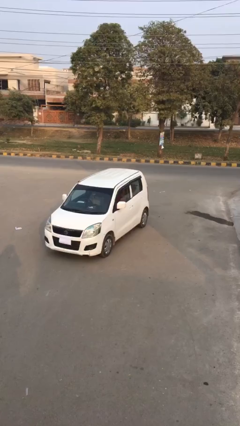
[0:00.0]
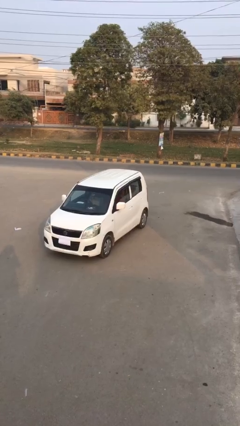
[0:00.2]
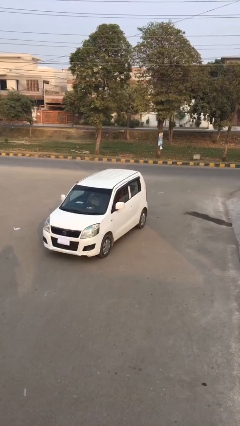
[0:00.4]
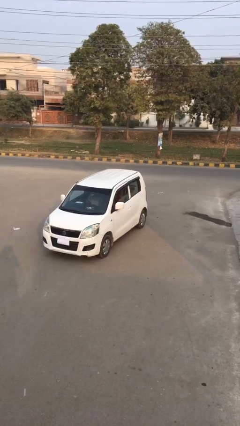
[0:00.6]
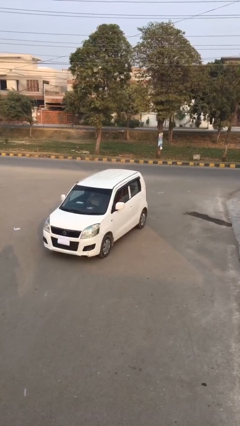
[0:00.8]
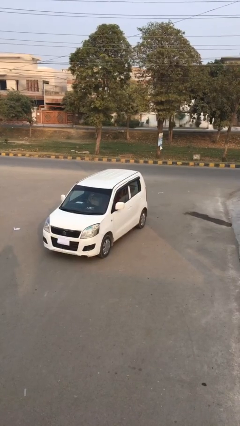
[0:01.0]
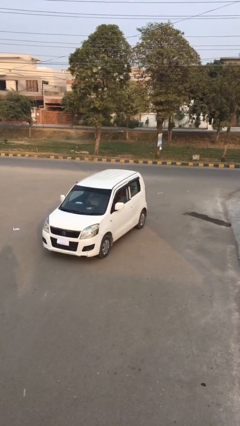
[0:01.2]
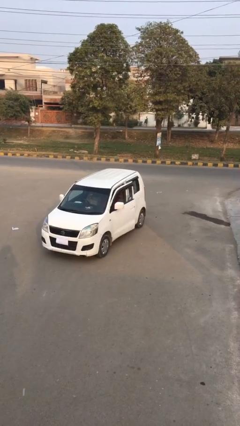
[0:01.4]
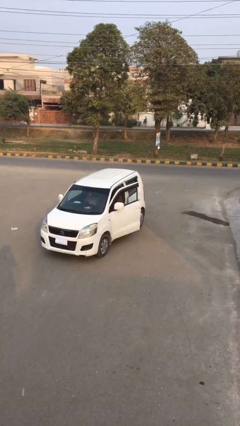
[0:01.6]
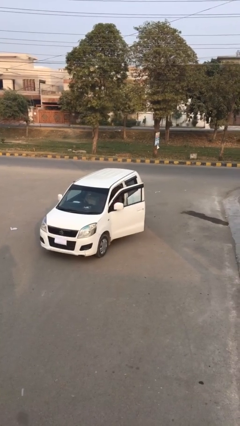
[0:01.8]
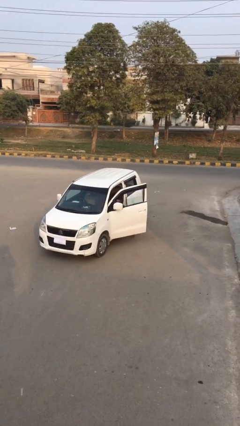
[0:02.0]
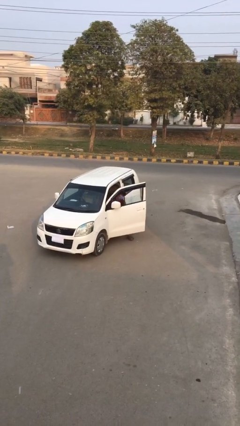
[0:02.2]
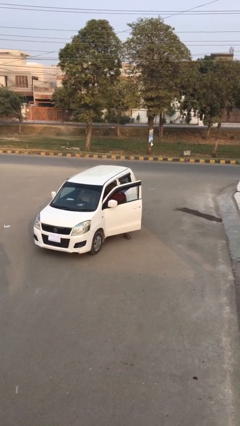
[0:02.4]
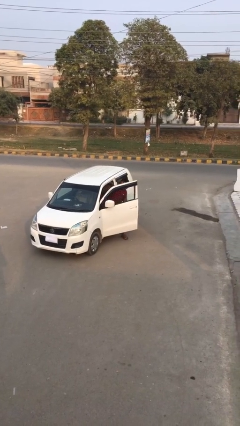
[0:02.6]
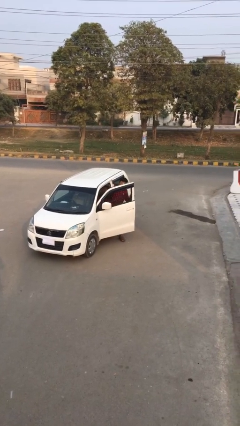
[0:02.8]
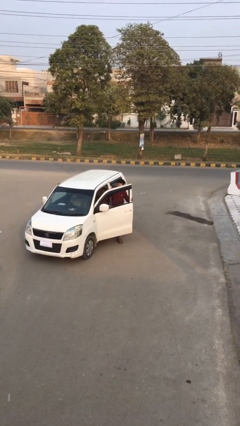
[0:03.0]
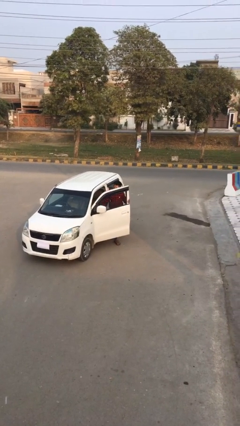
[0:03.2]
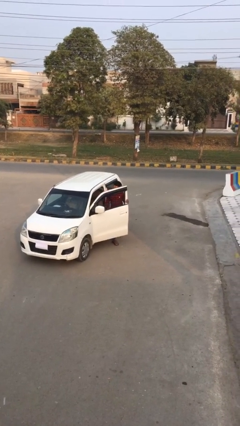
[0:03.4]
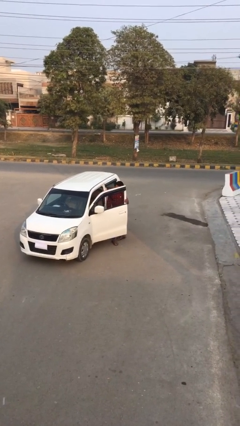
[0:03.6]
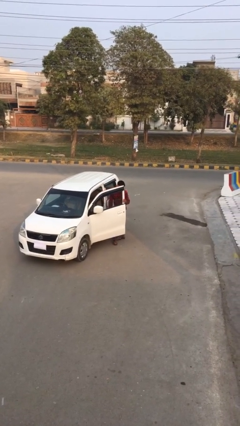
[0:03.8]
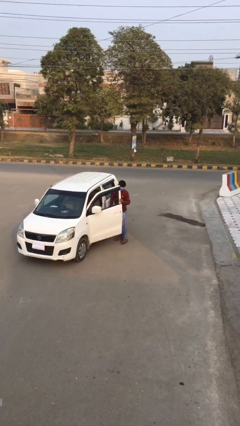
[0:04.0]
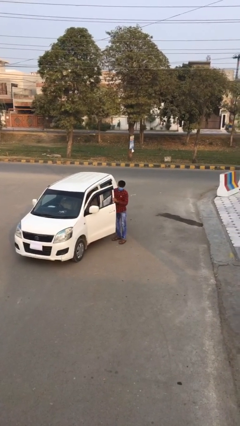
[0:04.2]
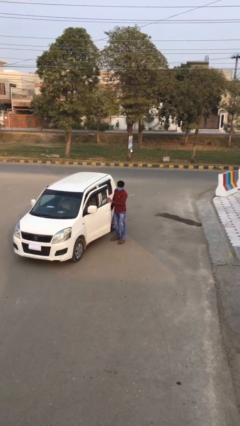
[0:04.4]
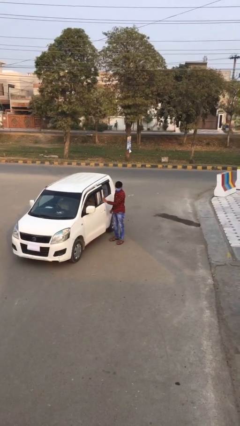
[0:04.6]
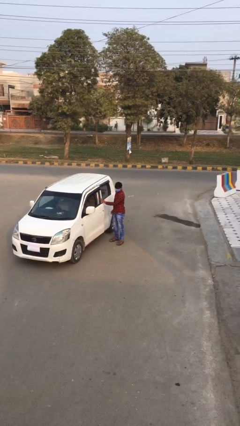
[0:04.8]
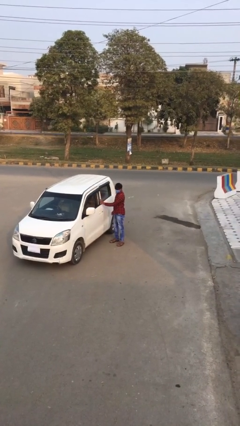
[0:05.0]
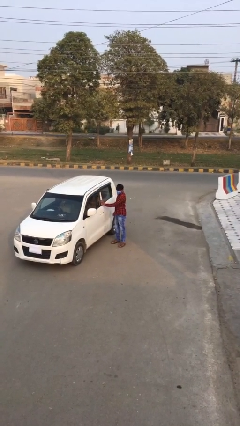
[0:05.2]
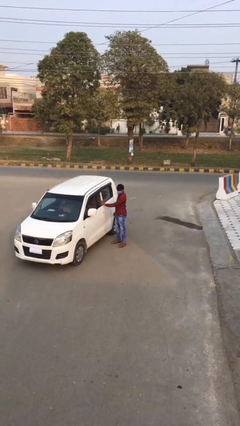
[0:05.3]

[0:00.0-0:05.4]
person exits car

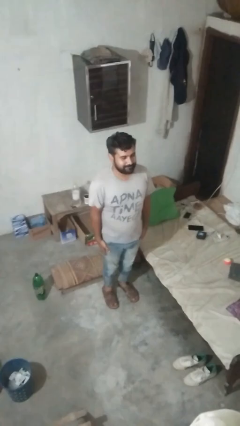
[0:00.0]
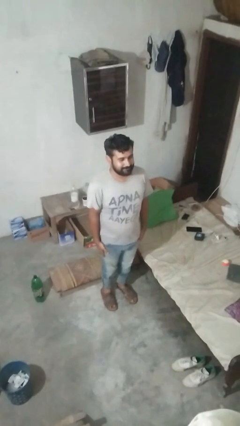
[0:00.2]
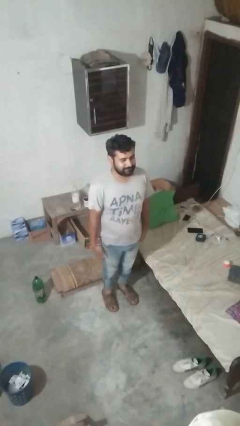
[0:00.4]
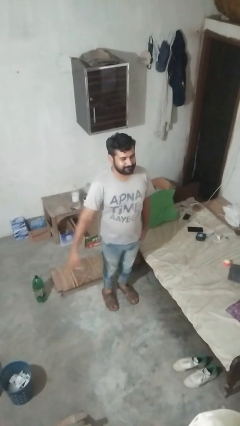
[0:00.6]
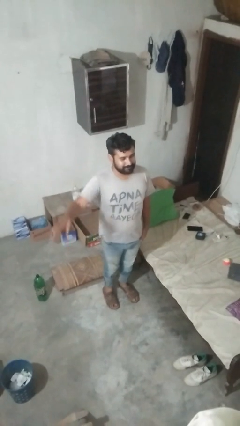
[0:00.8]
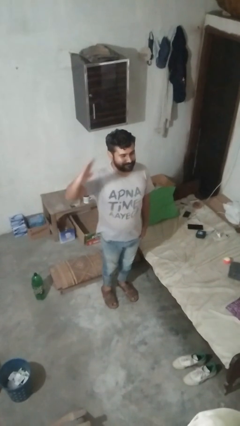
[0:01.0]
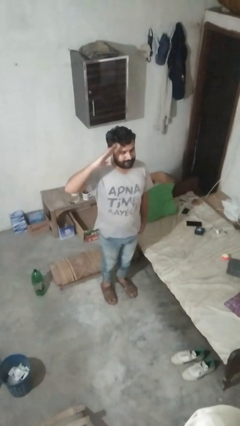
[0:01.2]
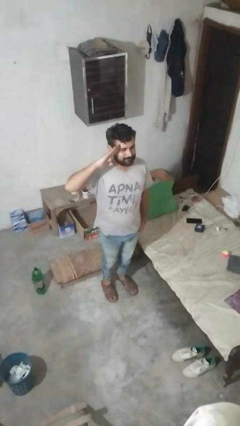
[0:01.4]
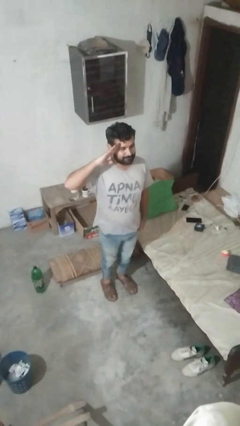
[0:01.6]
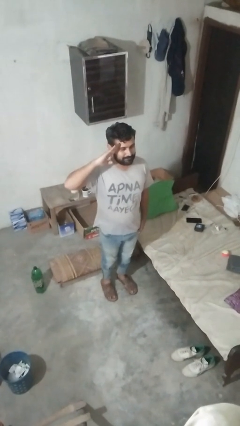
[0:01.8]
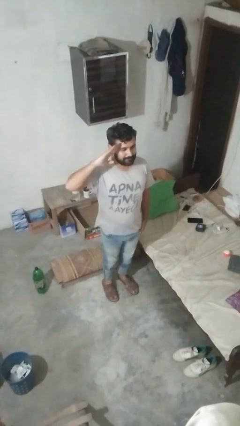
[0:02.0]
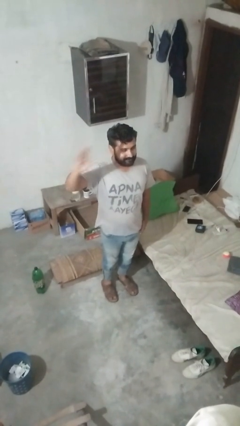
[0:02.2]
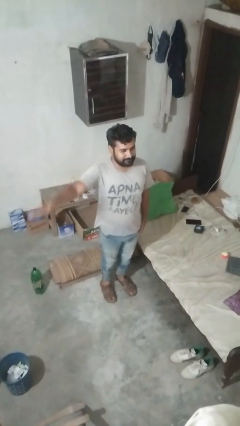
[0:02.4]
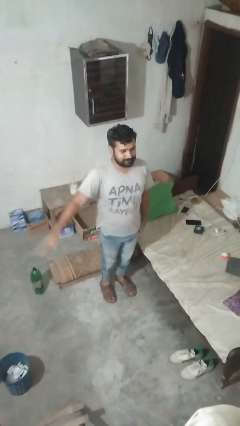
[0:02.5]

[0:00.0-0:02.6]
person salutes

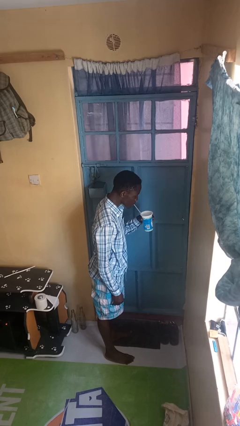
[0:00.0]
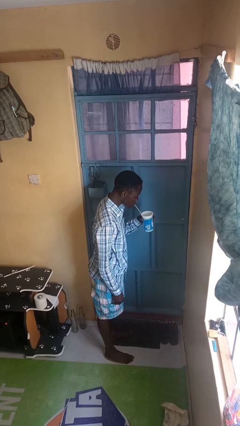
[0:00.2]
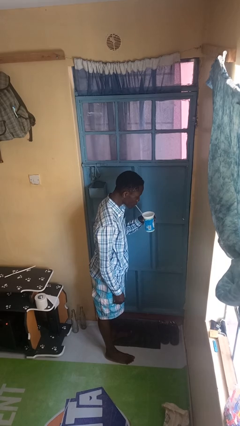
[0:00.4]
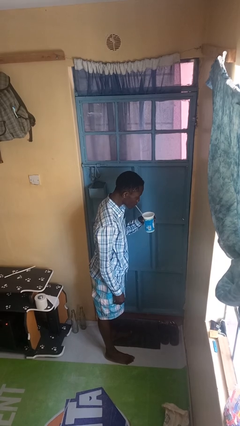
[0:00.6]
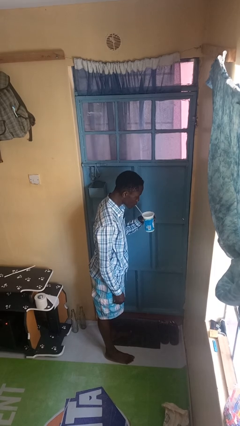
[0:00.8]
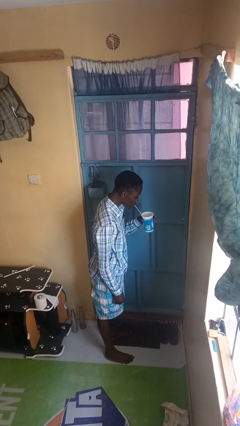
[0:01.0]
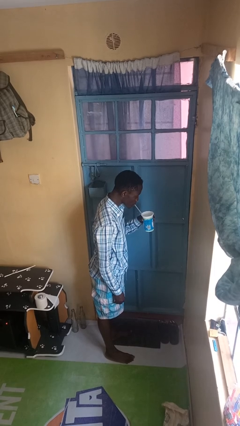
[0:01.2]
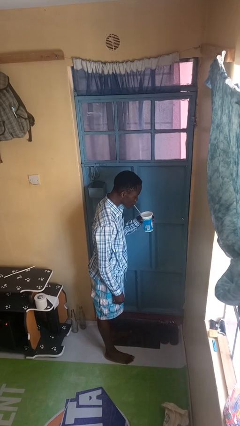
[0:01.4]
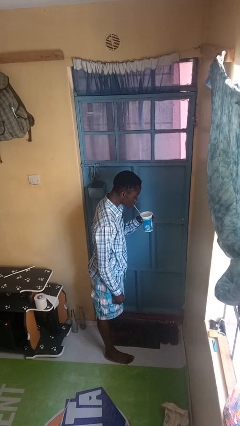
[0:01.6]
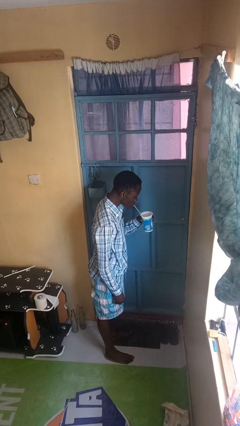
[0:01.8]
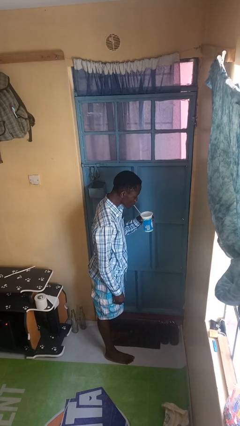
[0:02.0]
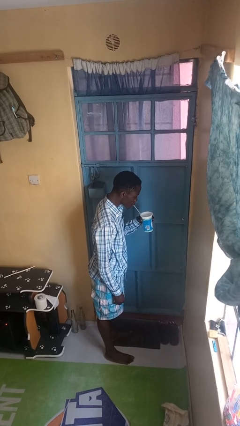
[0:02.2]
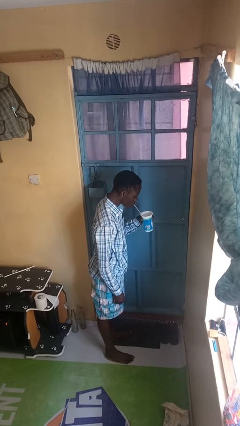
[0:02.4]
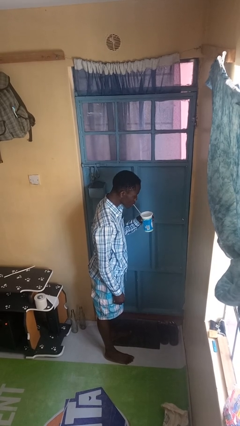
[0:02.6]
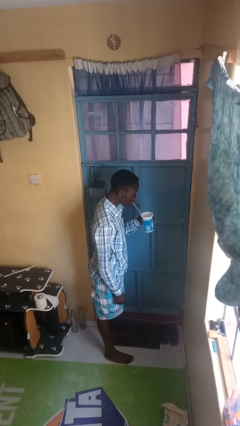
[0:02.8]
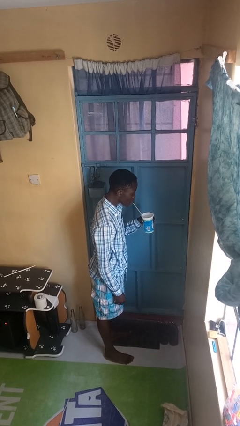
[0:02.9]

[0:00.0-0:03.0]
person drinks from straw

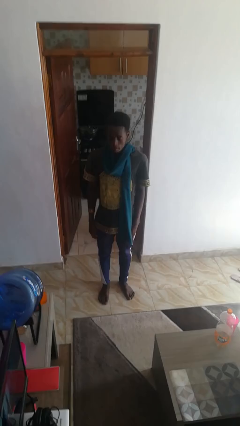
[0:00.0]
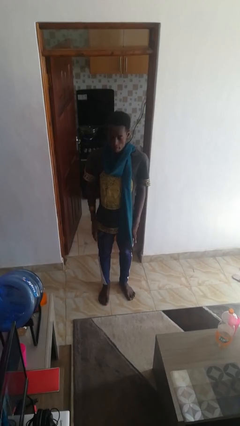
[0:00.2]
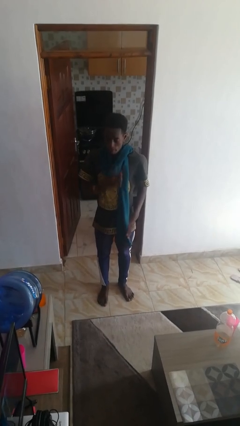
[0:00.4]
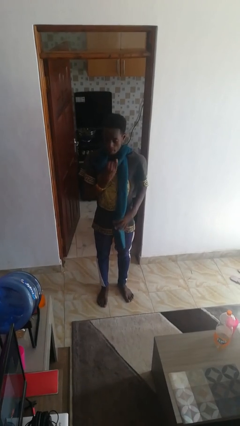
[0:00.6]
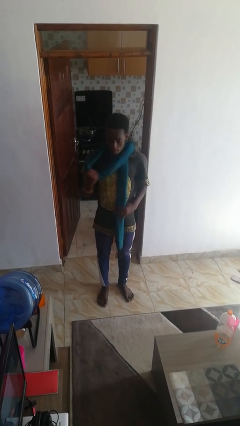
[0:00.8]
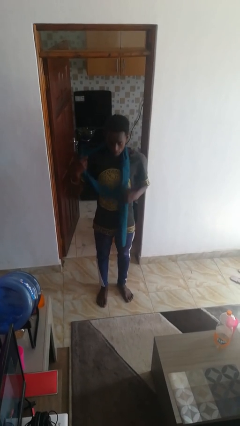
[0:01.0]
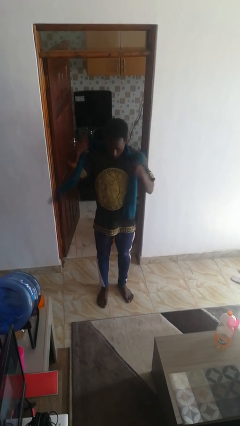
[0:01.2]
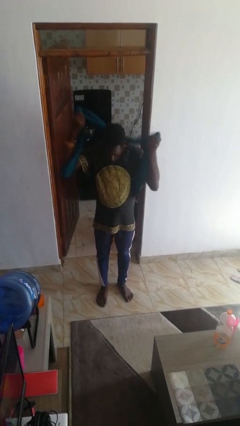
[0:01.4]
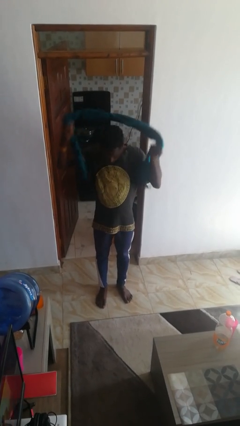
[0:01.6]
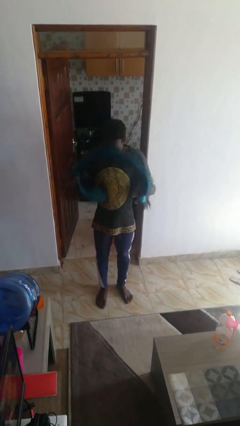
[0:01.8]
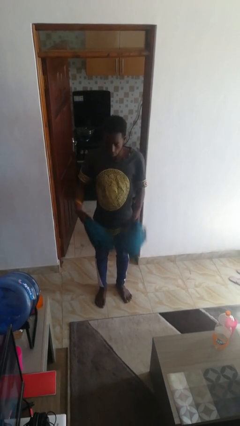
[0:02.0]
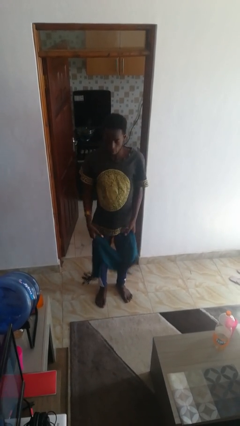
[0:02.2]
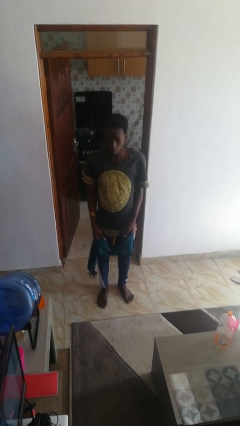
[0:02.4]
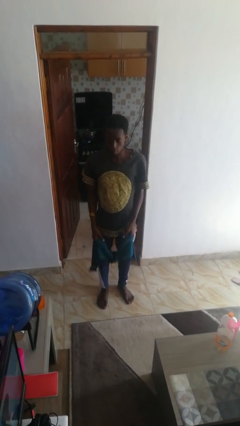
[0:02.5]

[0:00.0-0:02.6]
person takes off scarf

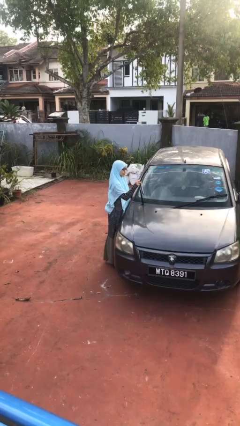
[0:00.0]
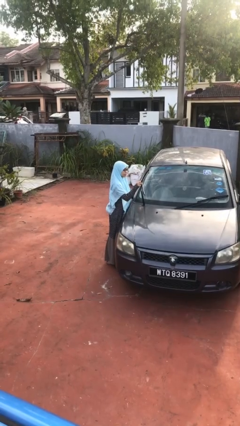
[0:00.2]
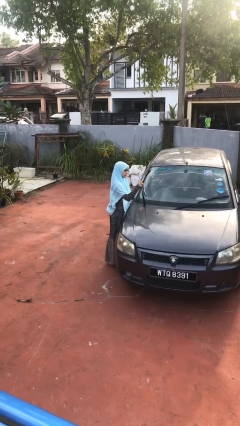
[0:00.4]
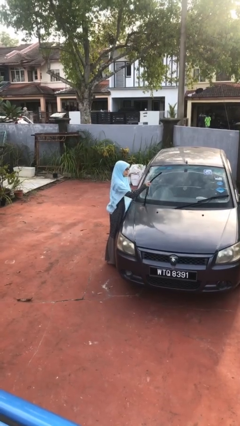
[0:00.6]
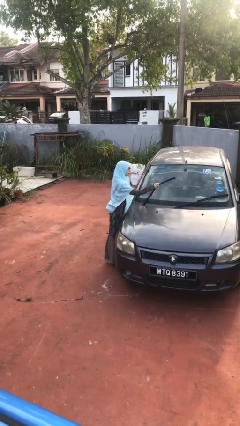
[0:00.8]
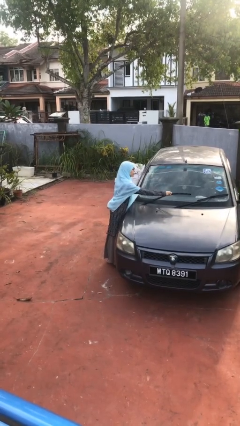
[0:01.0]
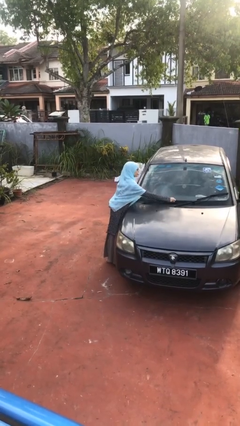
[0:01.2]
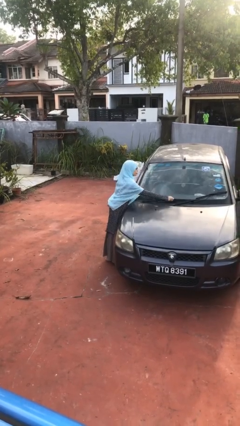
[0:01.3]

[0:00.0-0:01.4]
person flips down car wipers

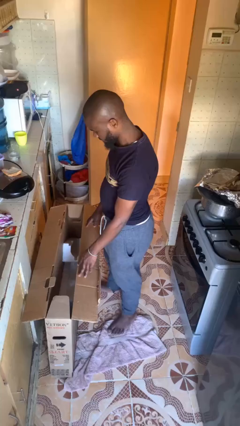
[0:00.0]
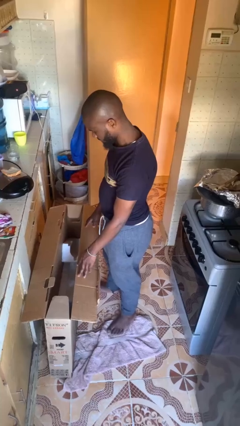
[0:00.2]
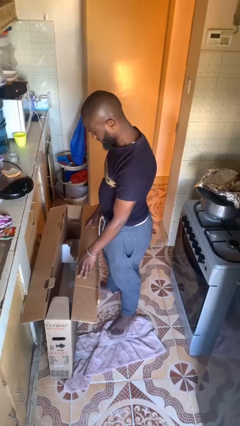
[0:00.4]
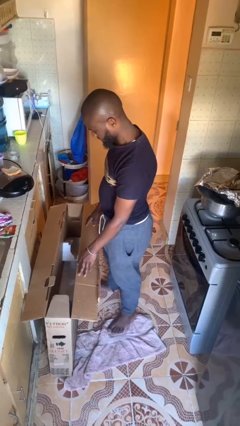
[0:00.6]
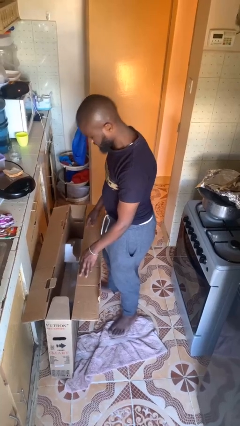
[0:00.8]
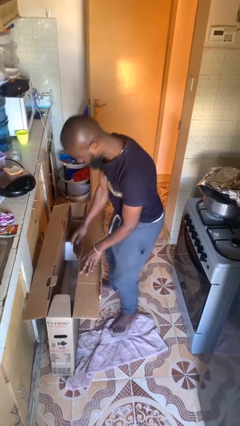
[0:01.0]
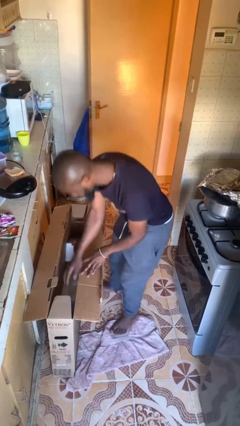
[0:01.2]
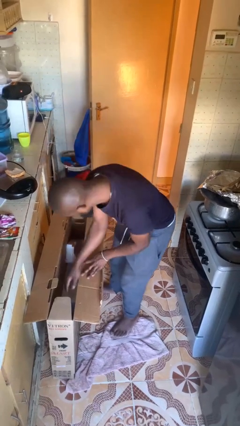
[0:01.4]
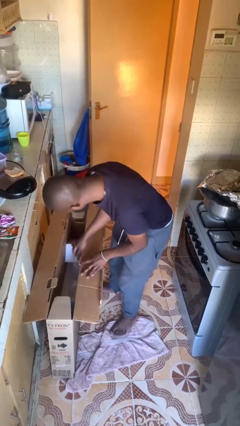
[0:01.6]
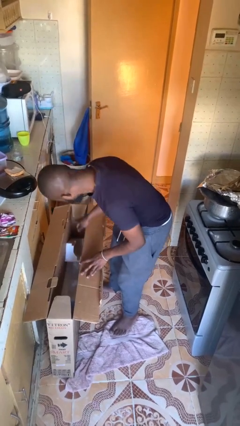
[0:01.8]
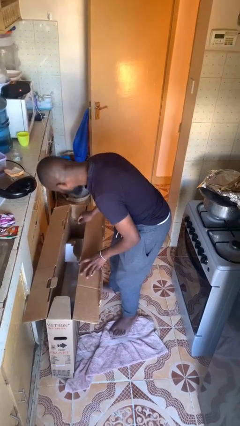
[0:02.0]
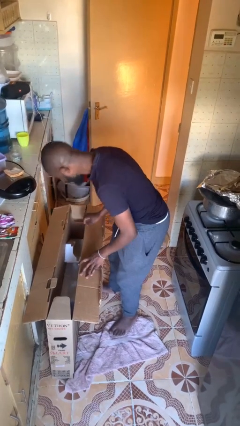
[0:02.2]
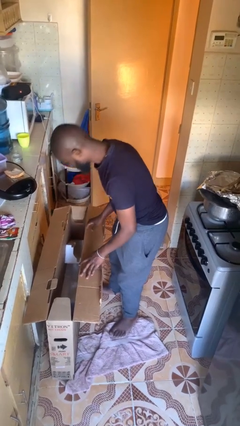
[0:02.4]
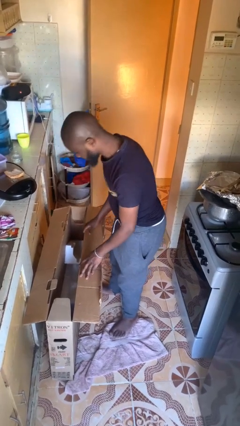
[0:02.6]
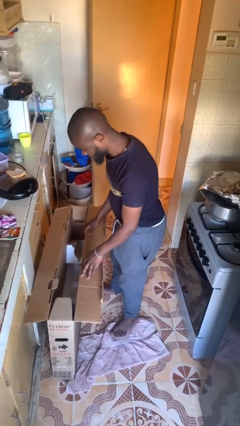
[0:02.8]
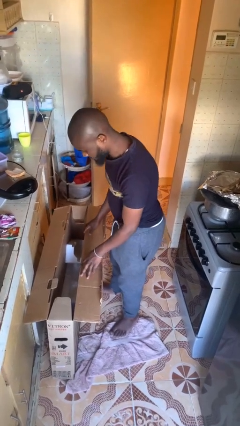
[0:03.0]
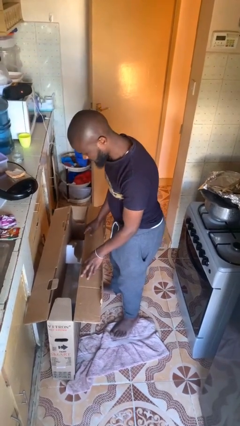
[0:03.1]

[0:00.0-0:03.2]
person searches in box
